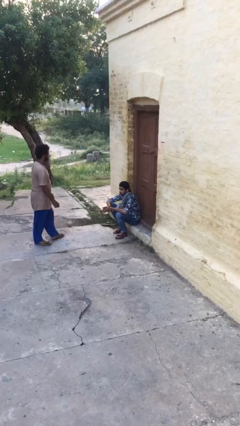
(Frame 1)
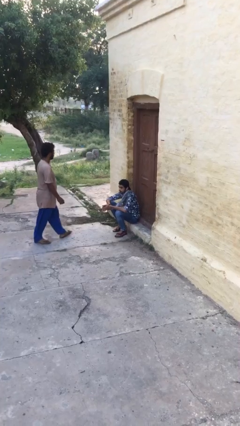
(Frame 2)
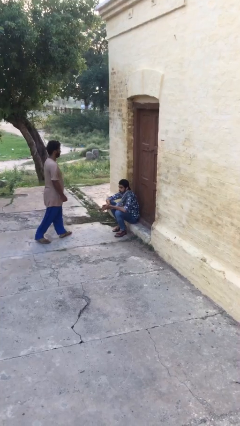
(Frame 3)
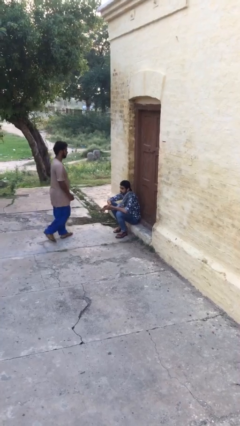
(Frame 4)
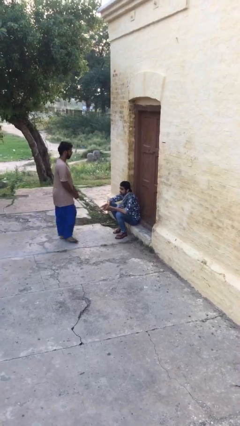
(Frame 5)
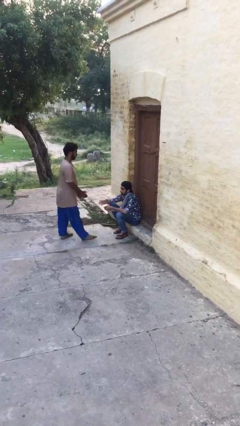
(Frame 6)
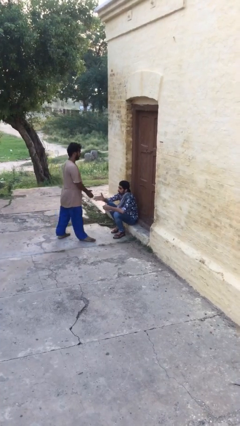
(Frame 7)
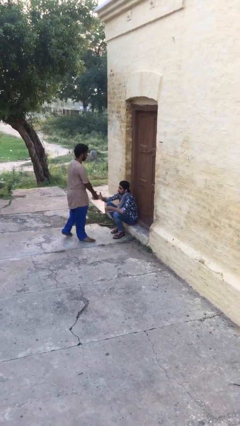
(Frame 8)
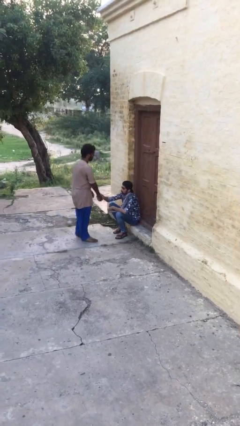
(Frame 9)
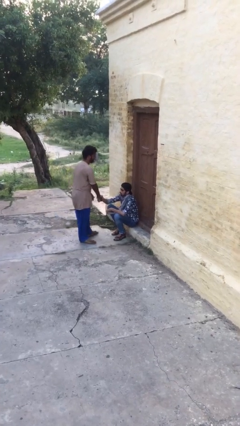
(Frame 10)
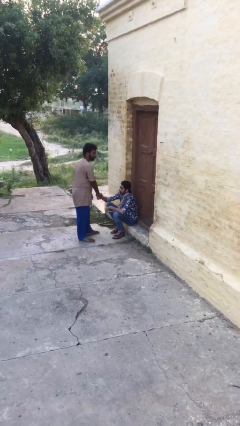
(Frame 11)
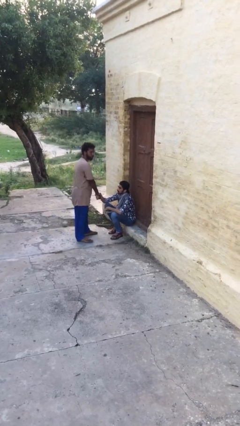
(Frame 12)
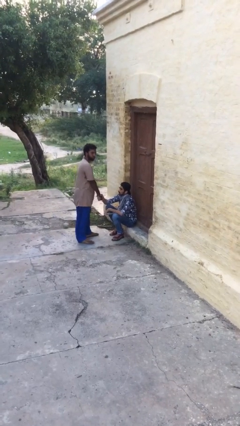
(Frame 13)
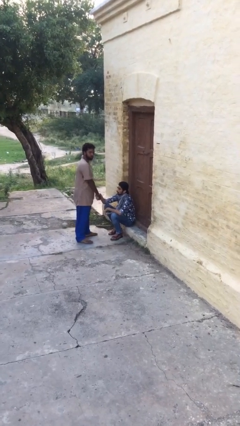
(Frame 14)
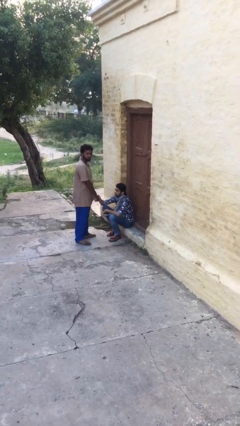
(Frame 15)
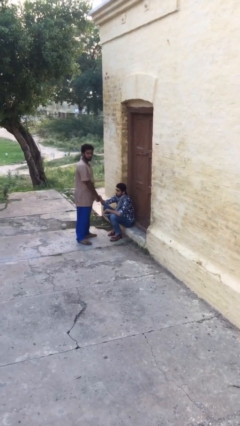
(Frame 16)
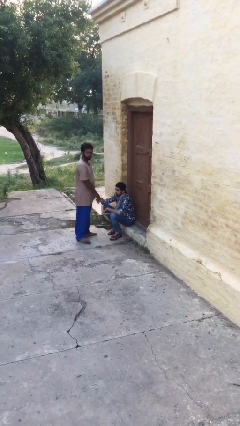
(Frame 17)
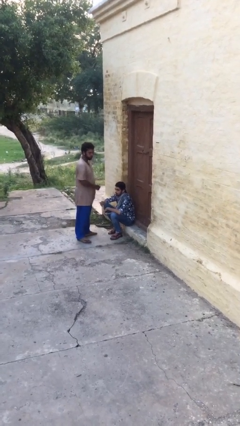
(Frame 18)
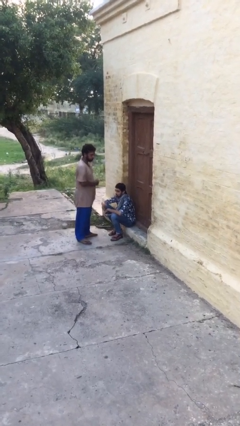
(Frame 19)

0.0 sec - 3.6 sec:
person shakes hand

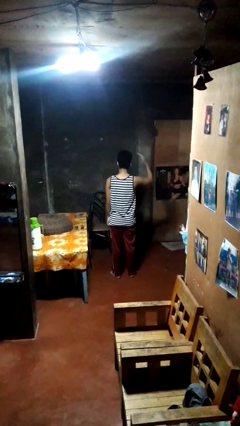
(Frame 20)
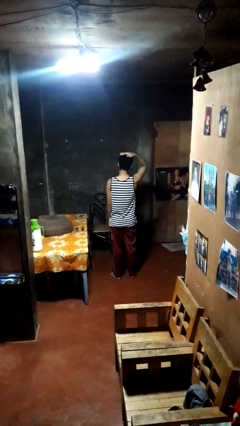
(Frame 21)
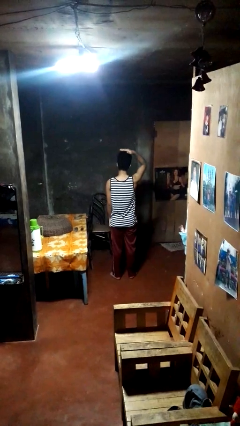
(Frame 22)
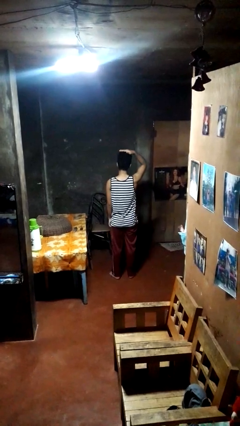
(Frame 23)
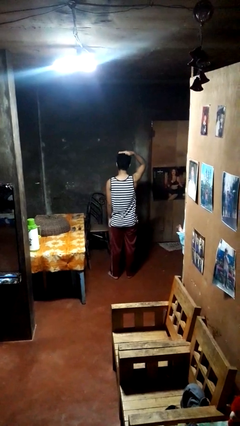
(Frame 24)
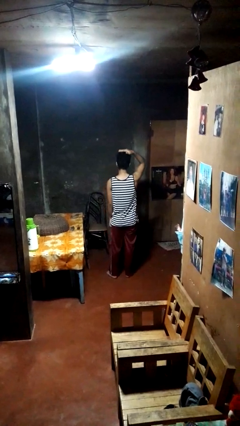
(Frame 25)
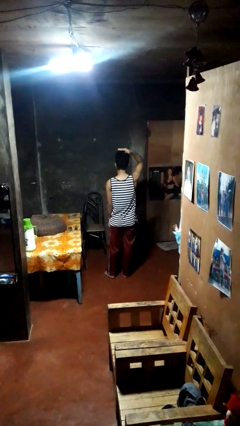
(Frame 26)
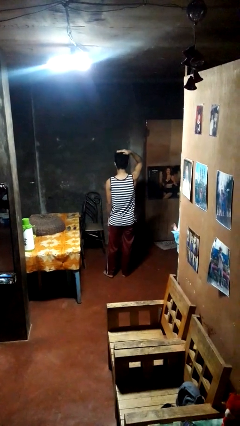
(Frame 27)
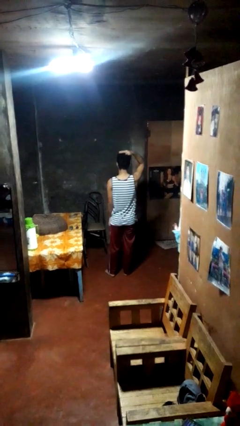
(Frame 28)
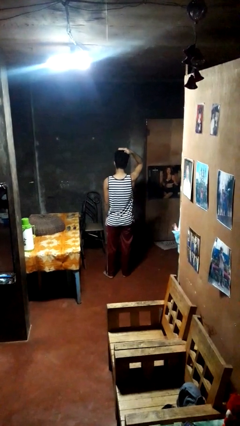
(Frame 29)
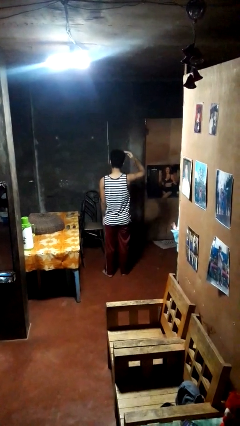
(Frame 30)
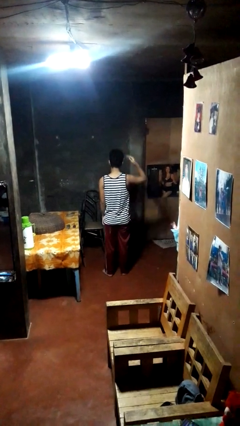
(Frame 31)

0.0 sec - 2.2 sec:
person pats head

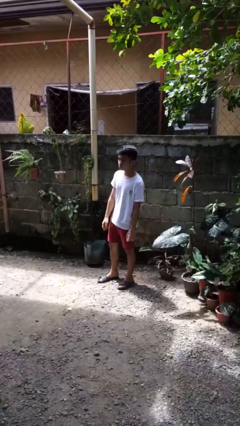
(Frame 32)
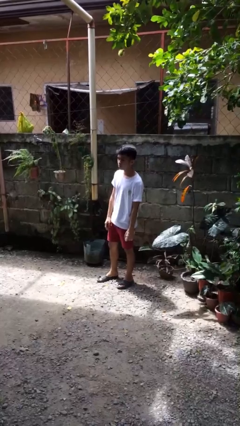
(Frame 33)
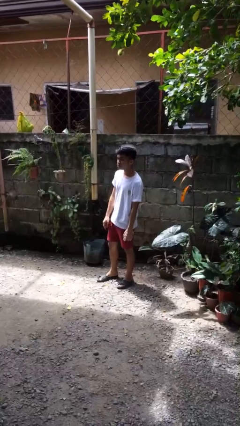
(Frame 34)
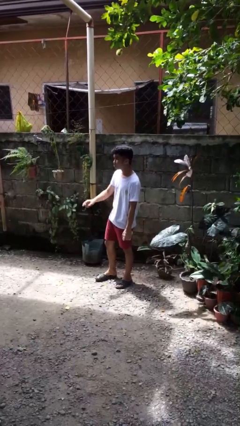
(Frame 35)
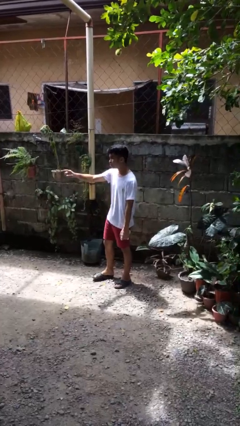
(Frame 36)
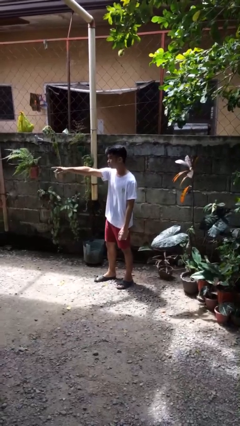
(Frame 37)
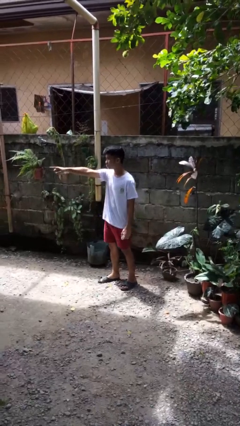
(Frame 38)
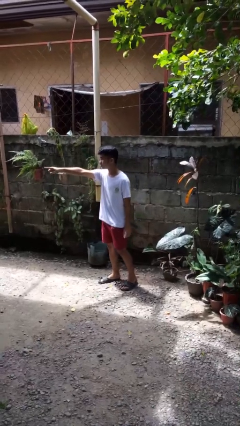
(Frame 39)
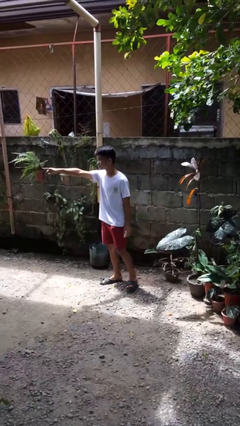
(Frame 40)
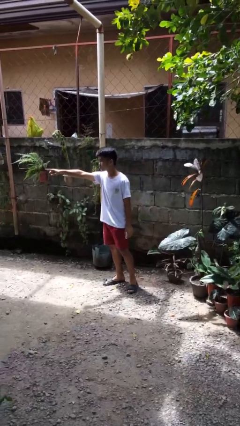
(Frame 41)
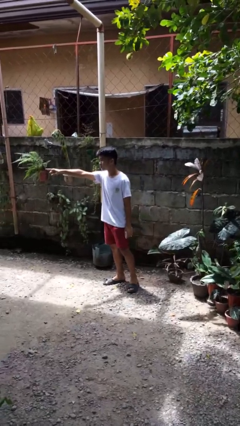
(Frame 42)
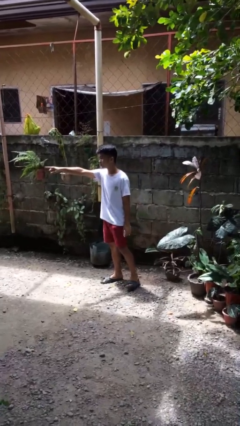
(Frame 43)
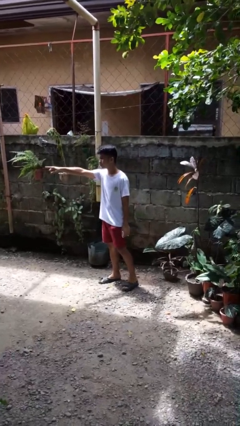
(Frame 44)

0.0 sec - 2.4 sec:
person points at person

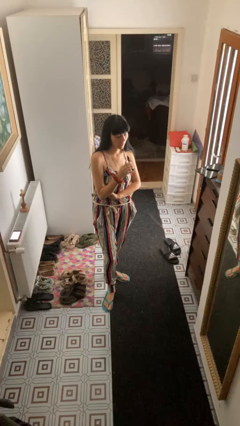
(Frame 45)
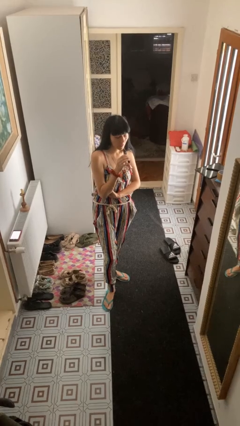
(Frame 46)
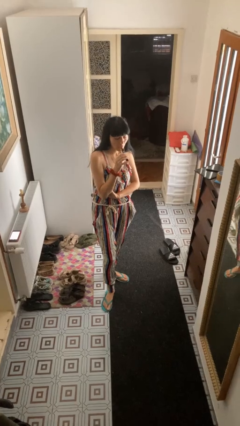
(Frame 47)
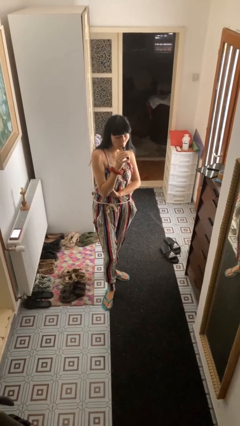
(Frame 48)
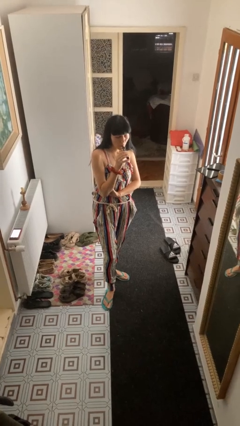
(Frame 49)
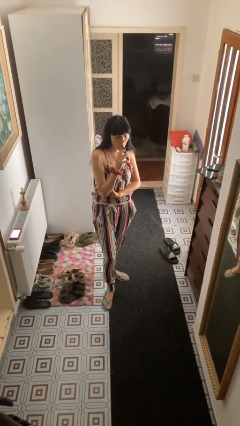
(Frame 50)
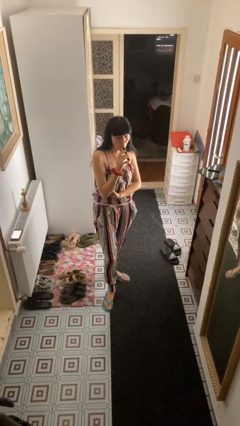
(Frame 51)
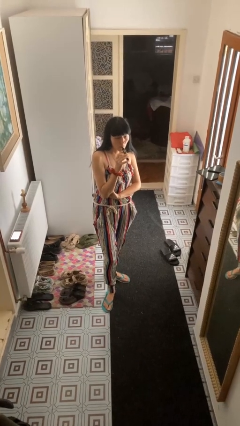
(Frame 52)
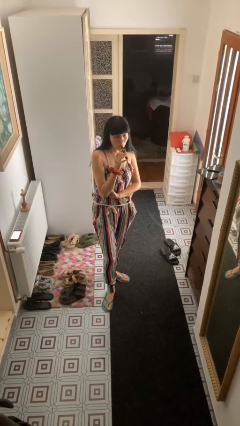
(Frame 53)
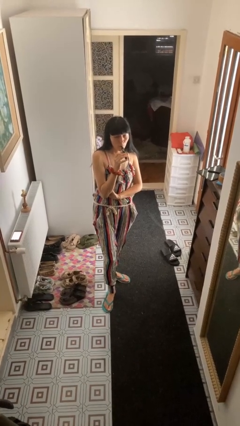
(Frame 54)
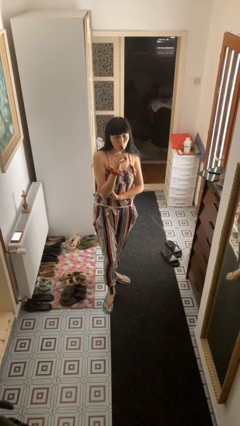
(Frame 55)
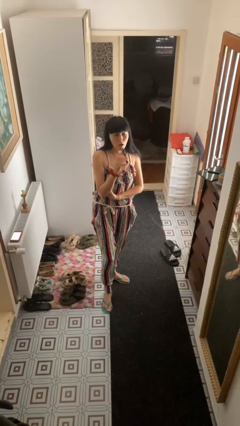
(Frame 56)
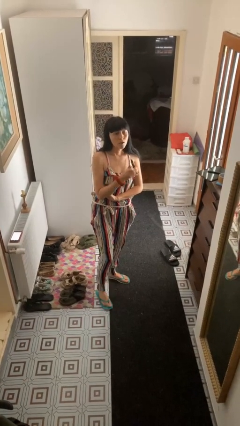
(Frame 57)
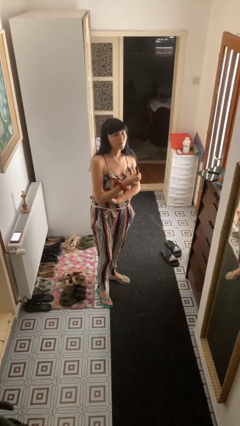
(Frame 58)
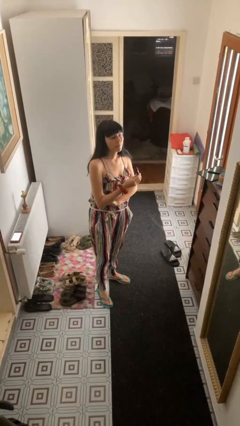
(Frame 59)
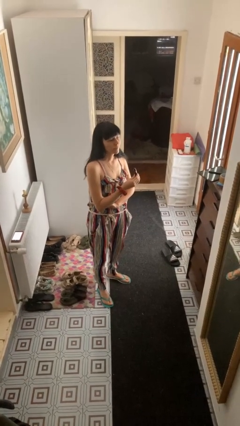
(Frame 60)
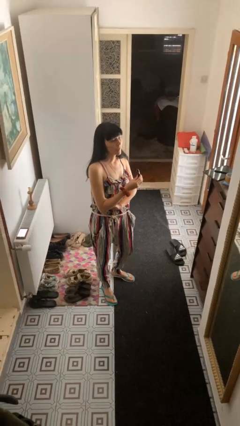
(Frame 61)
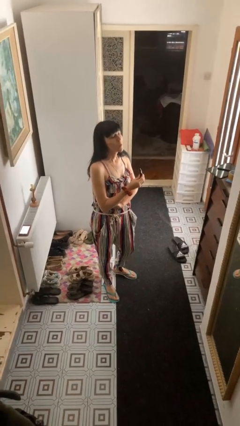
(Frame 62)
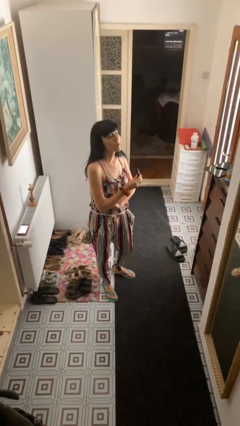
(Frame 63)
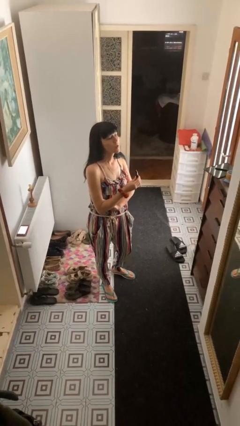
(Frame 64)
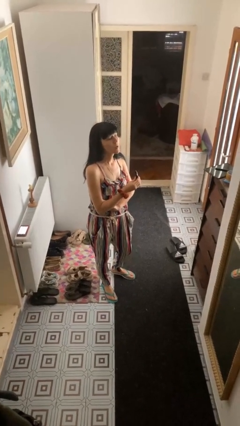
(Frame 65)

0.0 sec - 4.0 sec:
person vapes

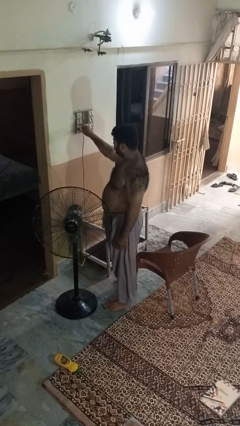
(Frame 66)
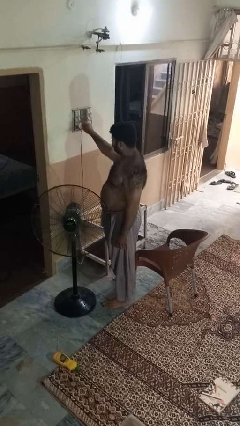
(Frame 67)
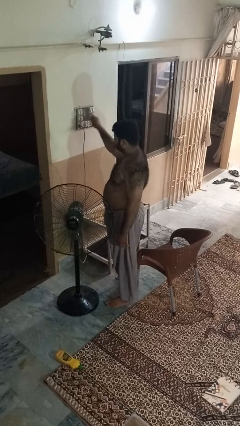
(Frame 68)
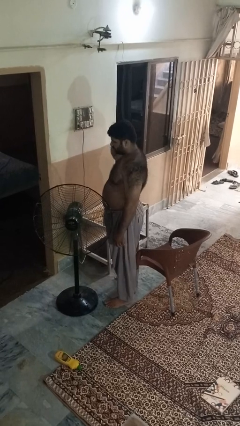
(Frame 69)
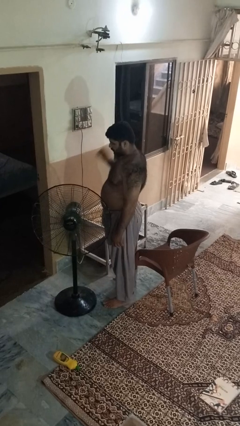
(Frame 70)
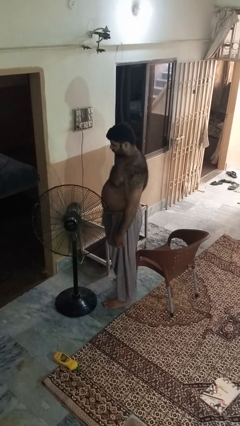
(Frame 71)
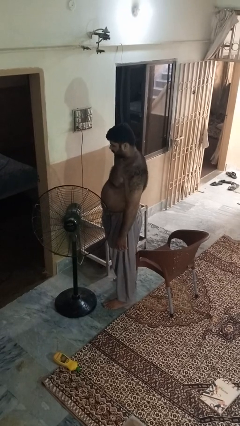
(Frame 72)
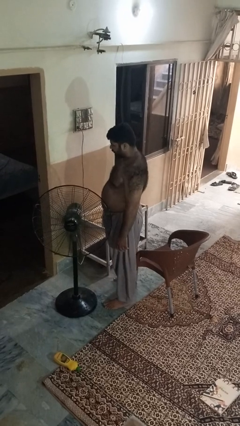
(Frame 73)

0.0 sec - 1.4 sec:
person turns on fan

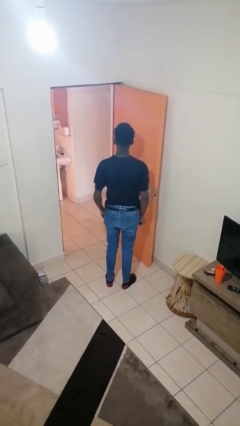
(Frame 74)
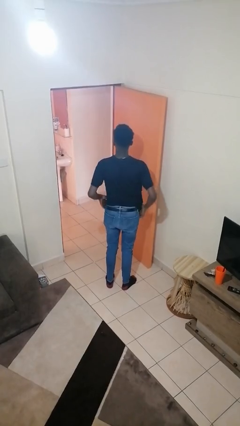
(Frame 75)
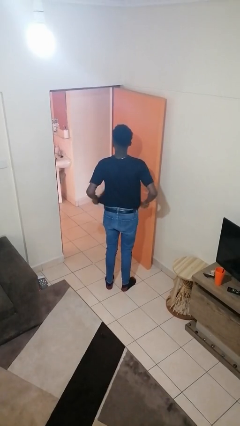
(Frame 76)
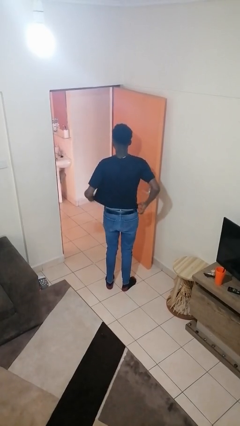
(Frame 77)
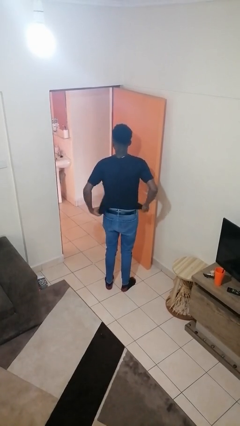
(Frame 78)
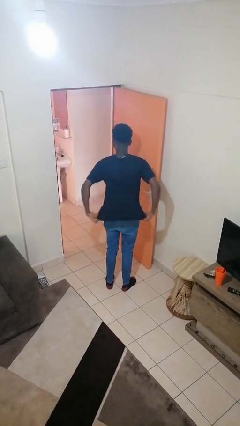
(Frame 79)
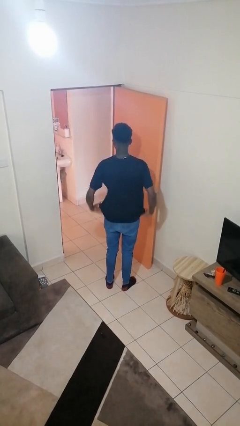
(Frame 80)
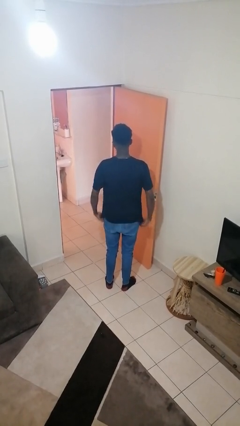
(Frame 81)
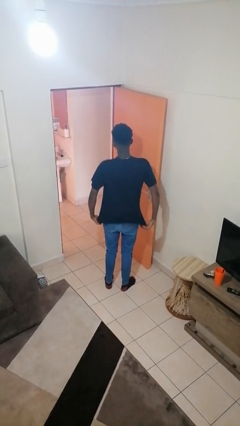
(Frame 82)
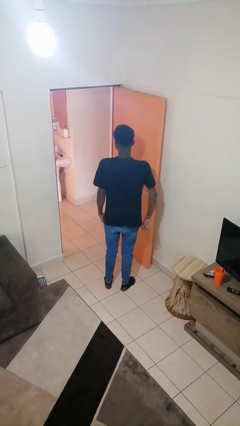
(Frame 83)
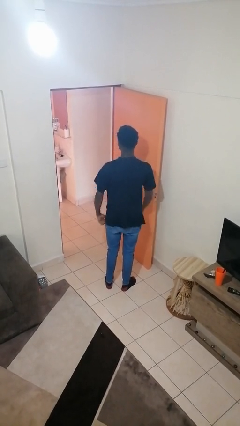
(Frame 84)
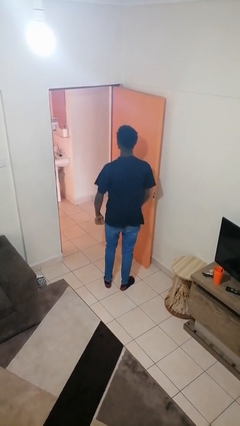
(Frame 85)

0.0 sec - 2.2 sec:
person untucks shirt

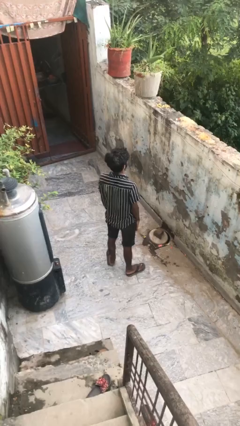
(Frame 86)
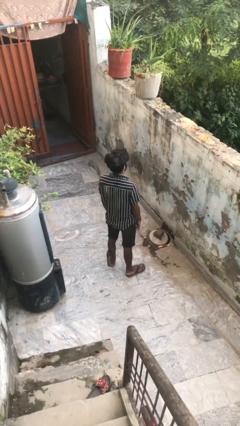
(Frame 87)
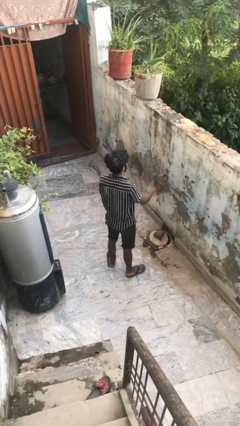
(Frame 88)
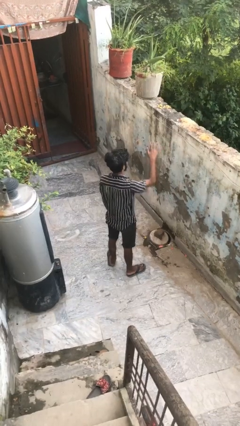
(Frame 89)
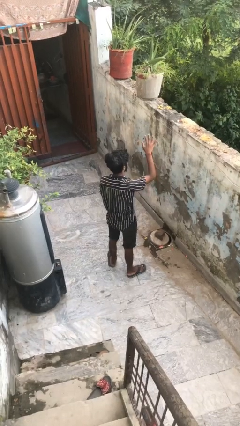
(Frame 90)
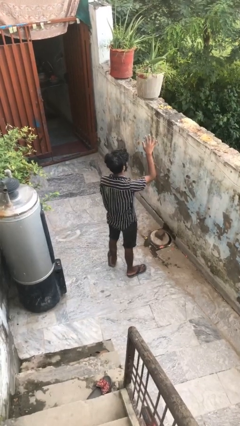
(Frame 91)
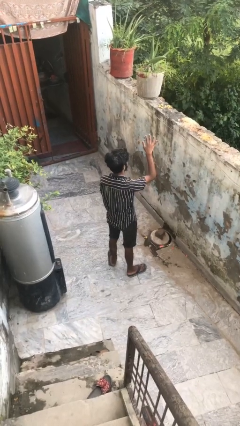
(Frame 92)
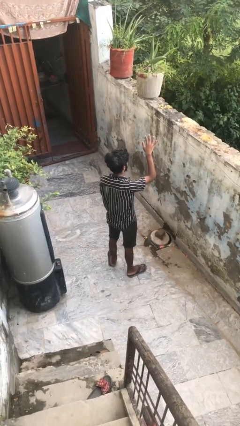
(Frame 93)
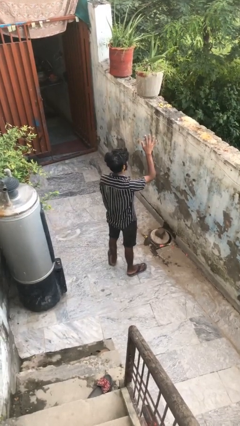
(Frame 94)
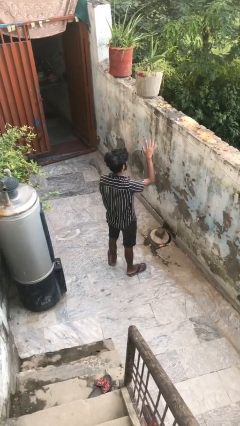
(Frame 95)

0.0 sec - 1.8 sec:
person gestures number five
